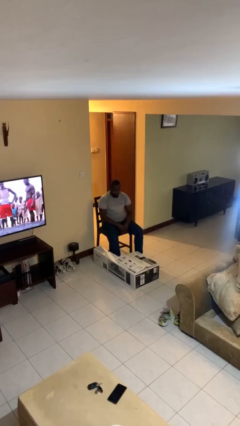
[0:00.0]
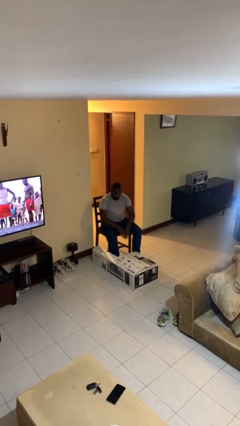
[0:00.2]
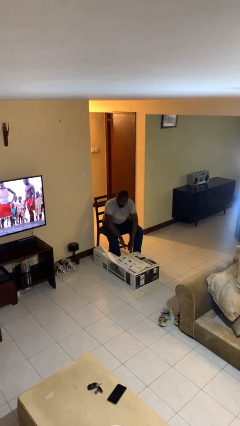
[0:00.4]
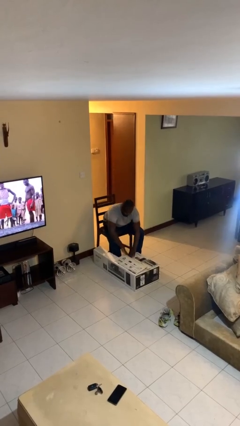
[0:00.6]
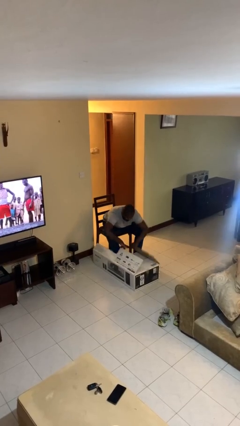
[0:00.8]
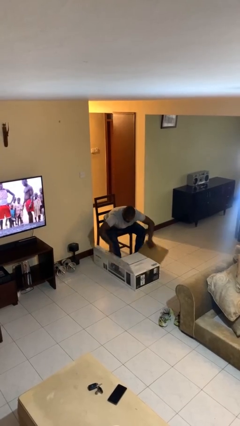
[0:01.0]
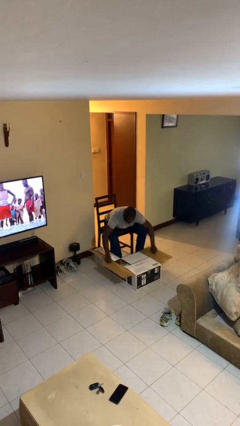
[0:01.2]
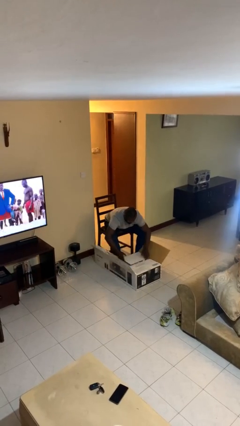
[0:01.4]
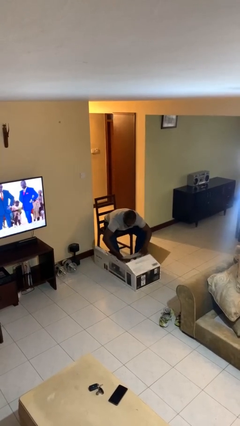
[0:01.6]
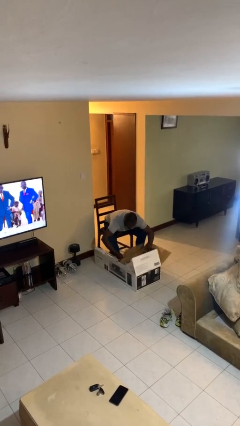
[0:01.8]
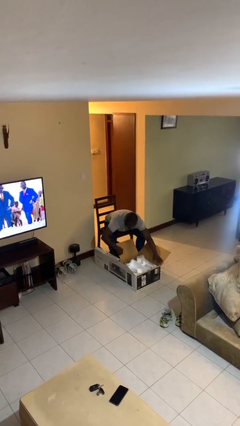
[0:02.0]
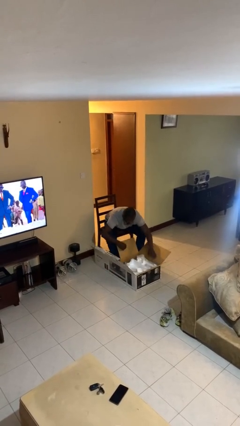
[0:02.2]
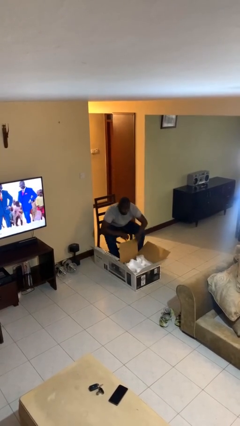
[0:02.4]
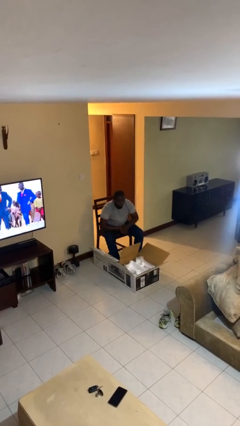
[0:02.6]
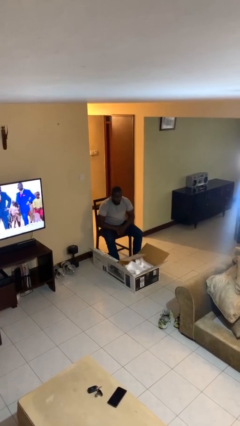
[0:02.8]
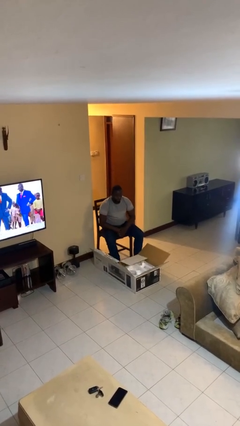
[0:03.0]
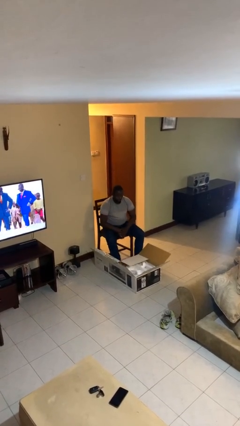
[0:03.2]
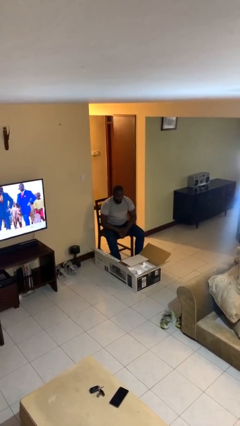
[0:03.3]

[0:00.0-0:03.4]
person opens box

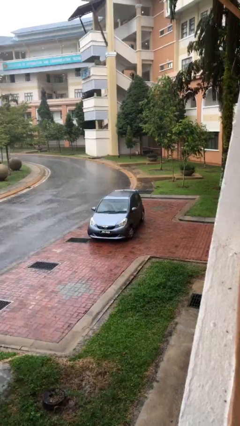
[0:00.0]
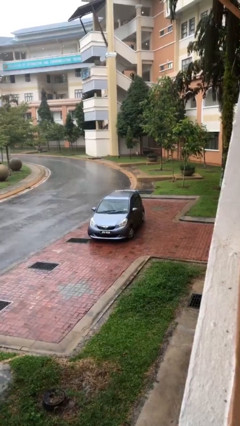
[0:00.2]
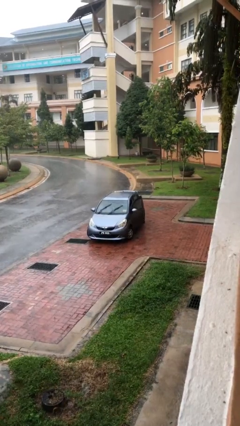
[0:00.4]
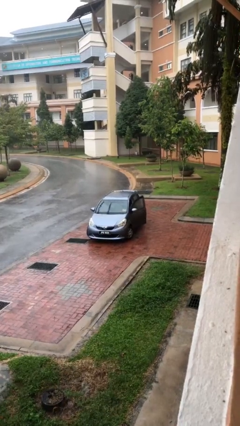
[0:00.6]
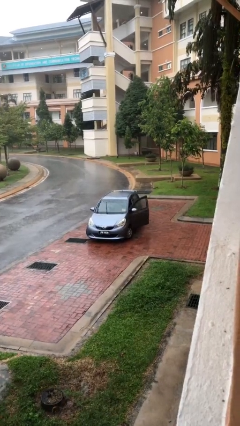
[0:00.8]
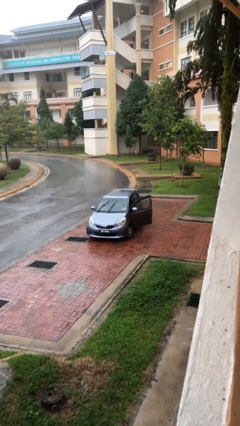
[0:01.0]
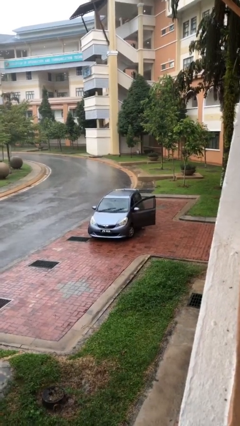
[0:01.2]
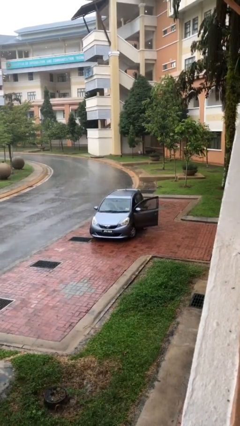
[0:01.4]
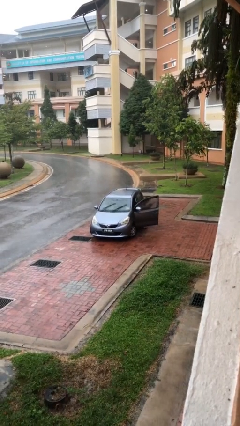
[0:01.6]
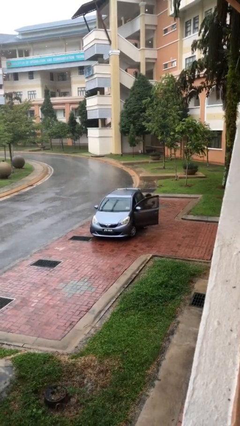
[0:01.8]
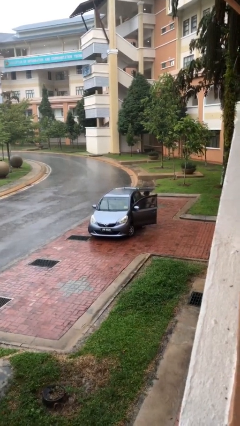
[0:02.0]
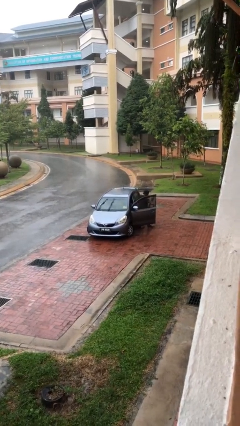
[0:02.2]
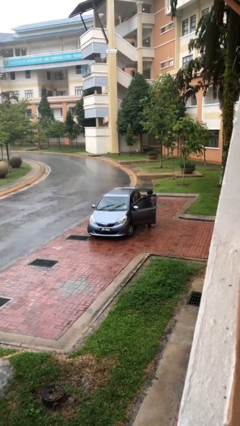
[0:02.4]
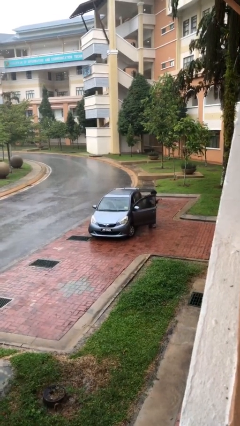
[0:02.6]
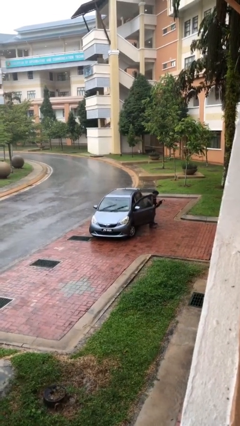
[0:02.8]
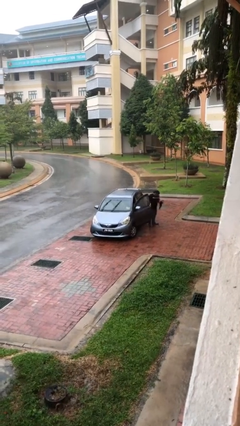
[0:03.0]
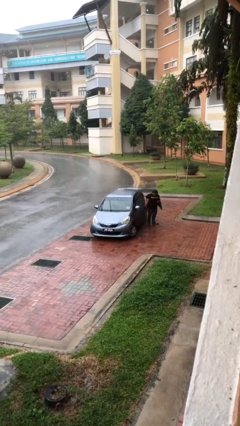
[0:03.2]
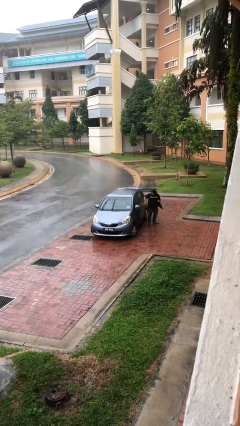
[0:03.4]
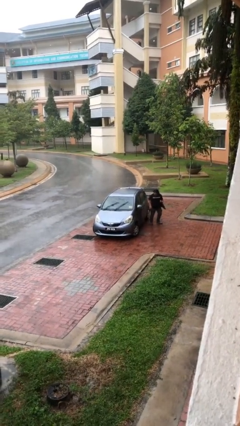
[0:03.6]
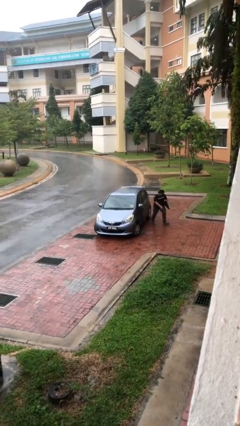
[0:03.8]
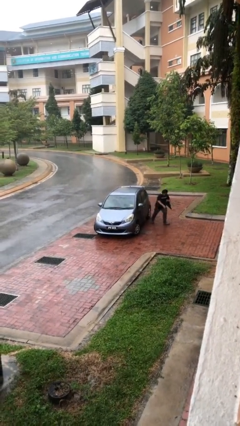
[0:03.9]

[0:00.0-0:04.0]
car drops off person

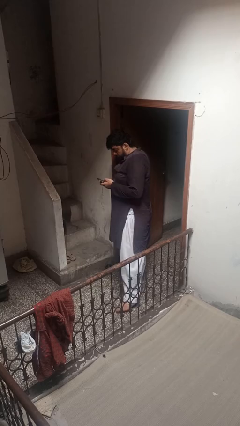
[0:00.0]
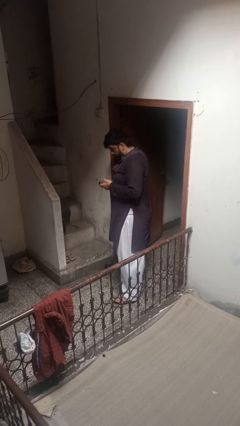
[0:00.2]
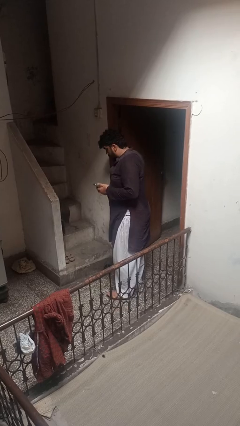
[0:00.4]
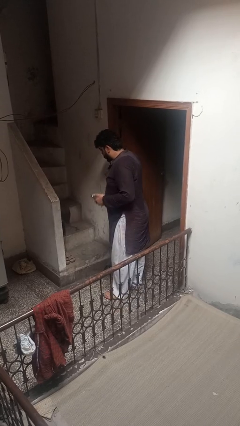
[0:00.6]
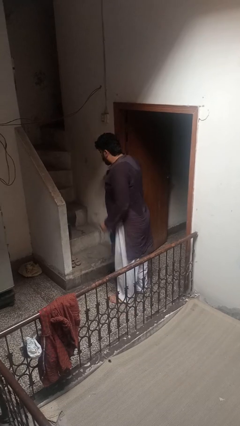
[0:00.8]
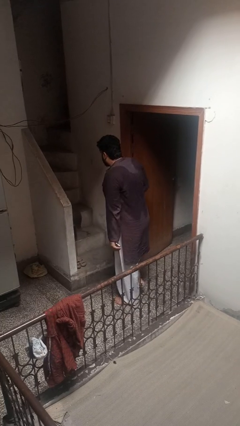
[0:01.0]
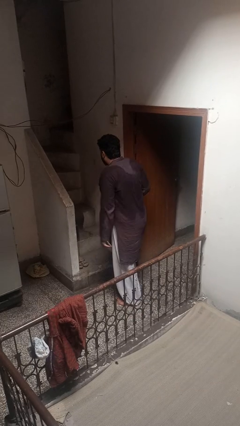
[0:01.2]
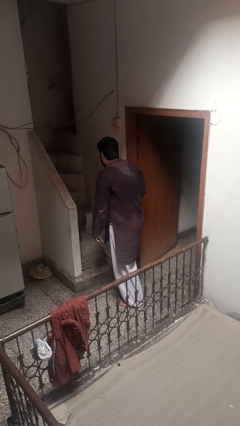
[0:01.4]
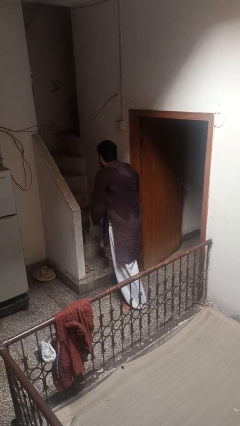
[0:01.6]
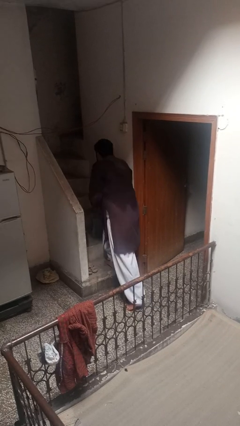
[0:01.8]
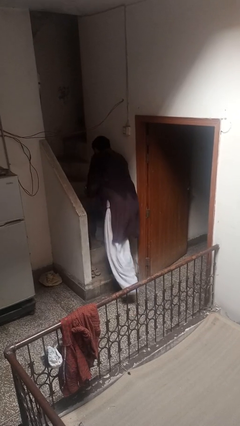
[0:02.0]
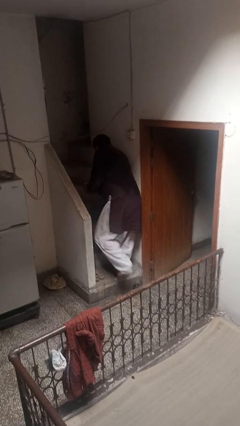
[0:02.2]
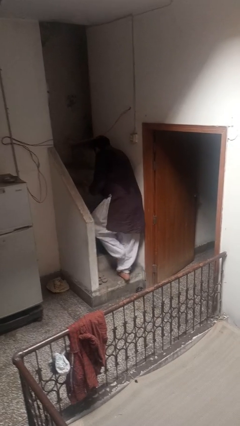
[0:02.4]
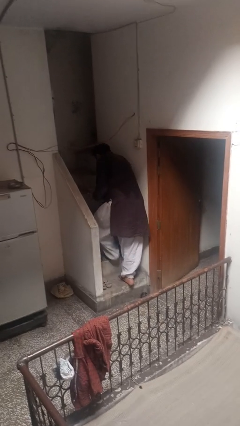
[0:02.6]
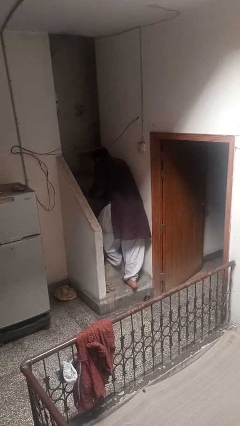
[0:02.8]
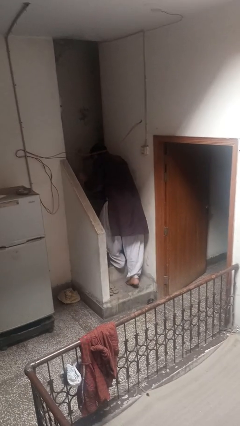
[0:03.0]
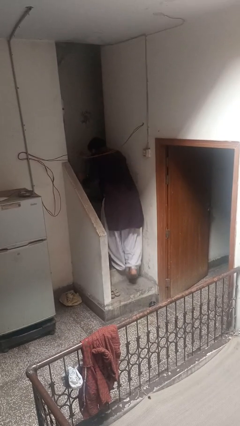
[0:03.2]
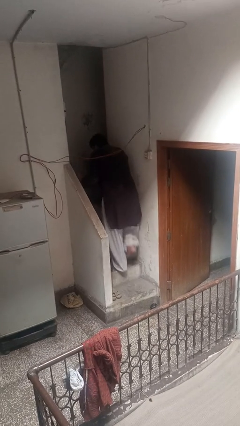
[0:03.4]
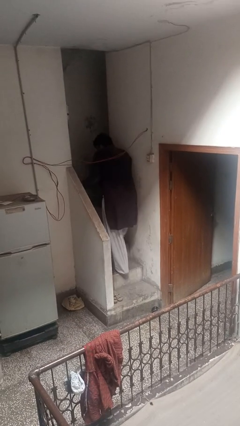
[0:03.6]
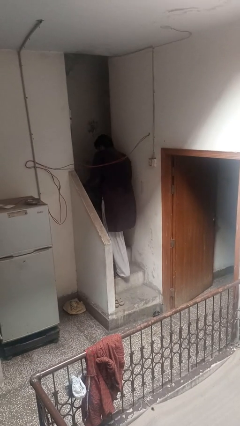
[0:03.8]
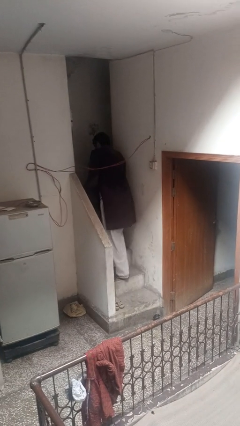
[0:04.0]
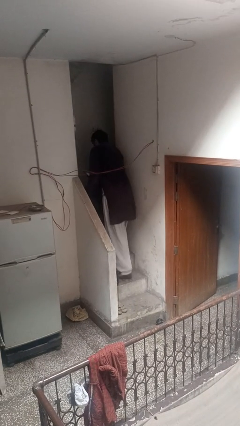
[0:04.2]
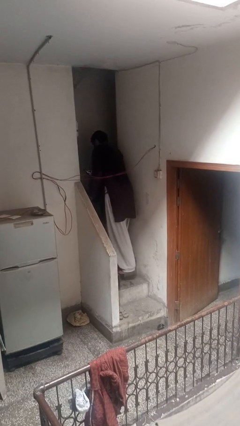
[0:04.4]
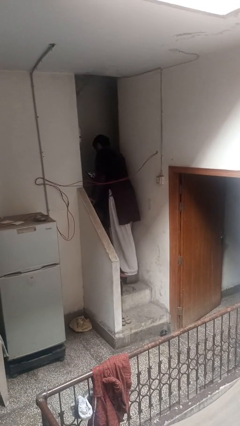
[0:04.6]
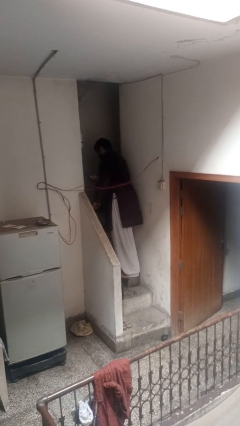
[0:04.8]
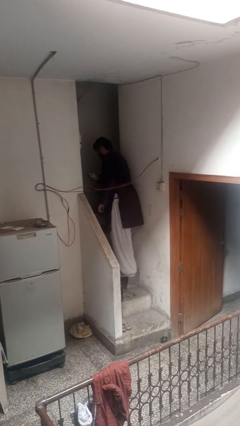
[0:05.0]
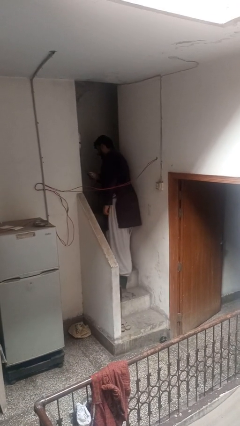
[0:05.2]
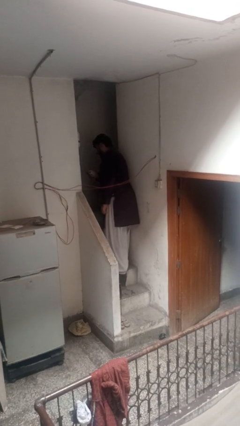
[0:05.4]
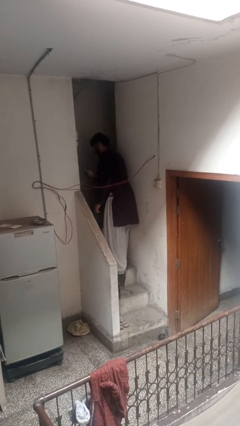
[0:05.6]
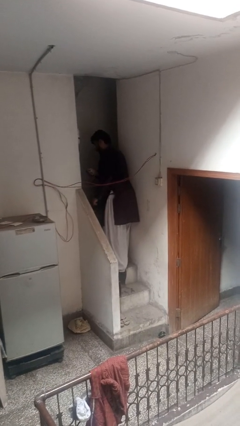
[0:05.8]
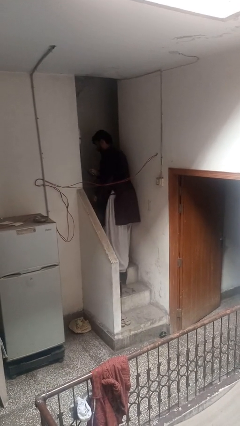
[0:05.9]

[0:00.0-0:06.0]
person climbs up stairs

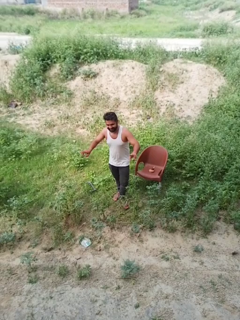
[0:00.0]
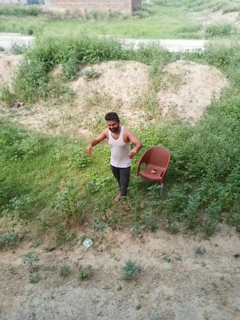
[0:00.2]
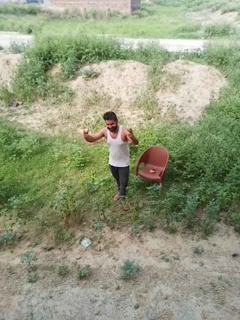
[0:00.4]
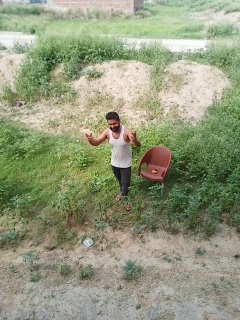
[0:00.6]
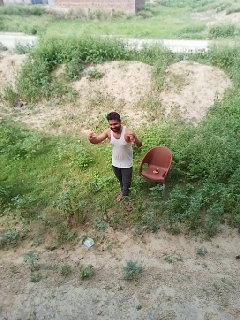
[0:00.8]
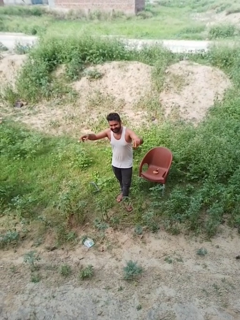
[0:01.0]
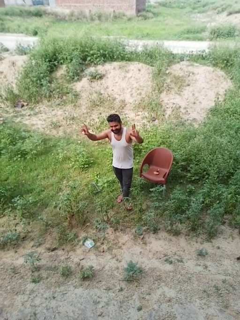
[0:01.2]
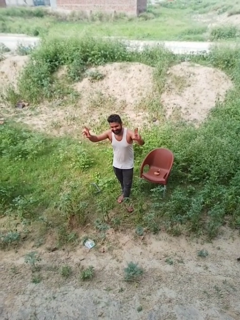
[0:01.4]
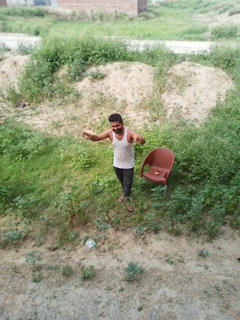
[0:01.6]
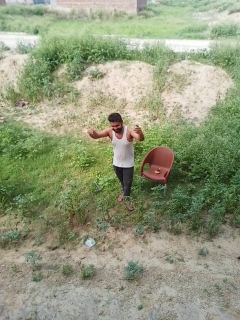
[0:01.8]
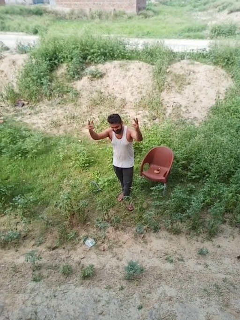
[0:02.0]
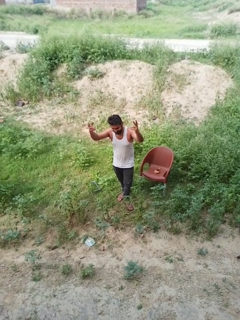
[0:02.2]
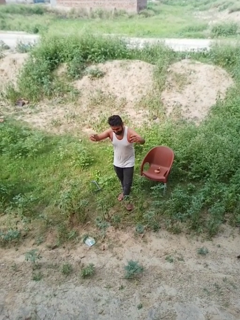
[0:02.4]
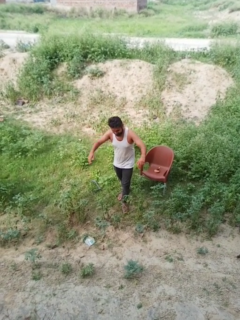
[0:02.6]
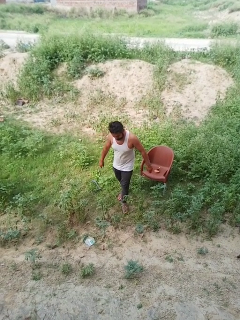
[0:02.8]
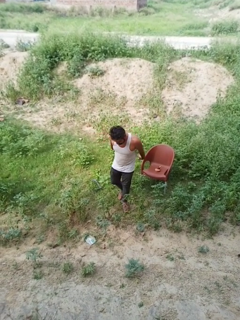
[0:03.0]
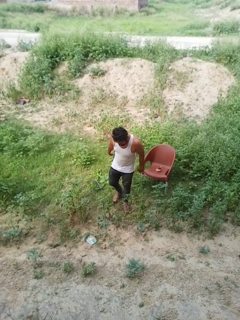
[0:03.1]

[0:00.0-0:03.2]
person dances in place

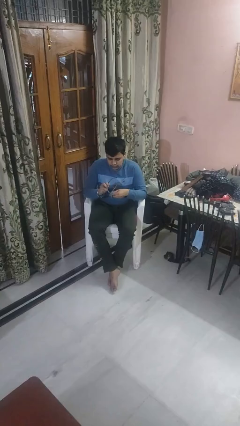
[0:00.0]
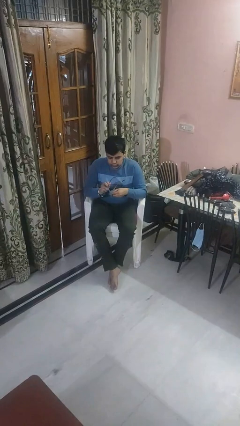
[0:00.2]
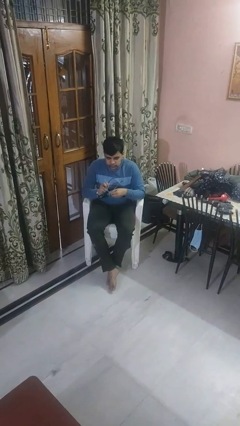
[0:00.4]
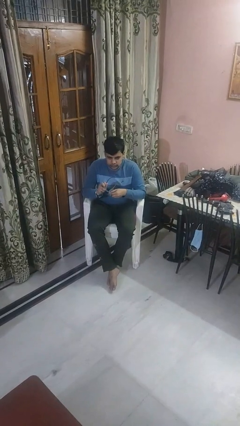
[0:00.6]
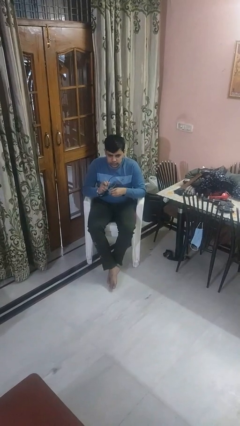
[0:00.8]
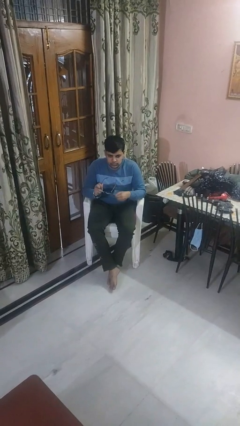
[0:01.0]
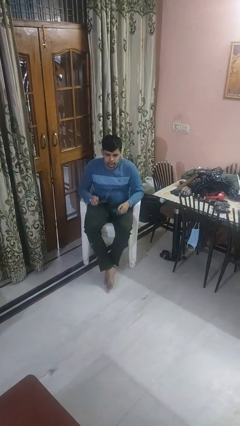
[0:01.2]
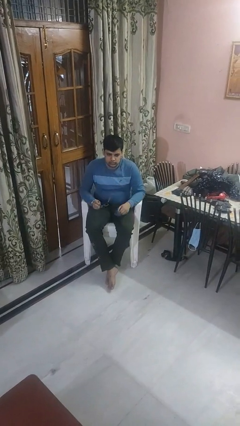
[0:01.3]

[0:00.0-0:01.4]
person cleans eyeglasses

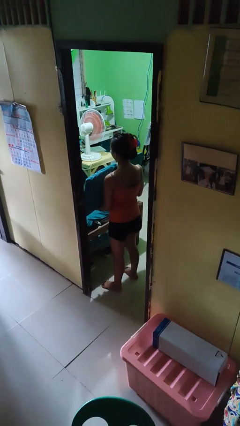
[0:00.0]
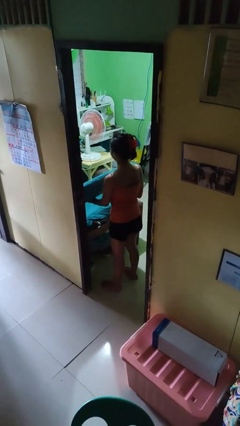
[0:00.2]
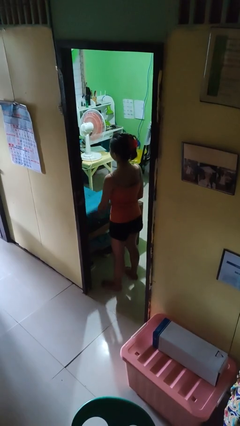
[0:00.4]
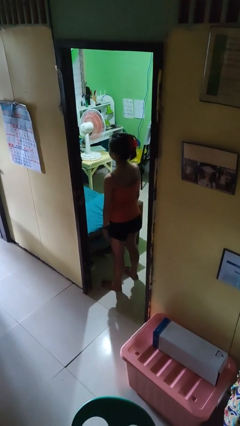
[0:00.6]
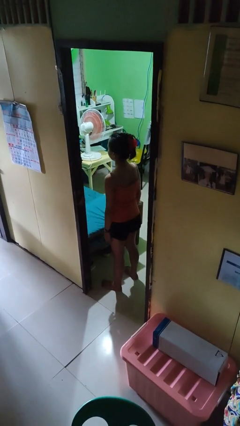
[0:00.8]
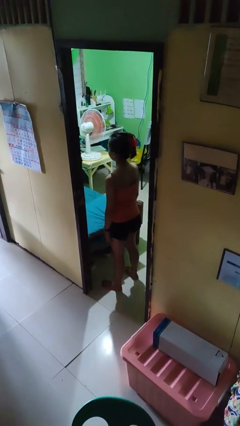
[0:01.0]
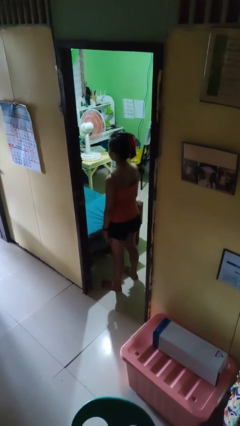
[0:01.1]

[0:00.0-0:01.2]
person puts down object on bed
